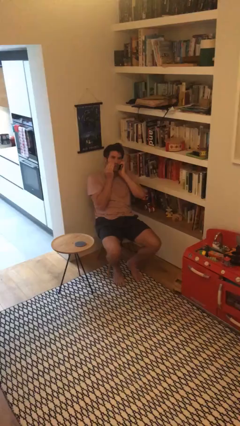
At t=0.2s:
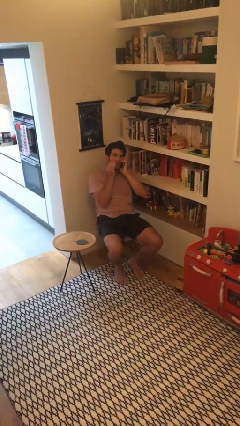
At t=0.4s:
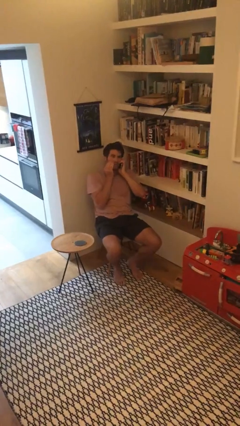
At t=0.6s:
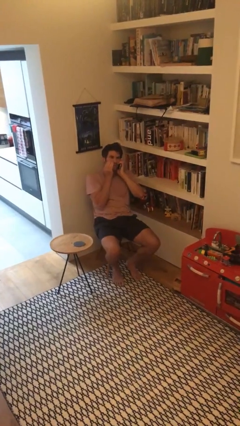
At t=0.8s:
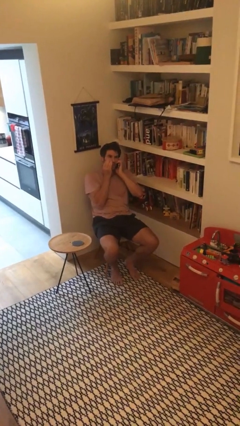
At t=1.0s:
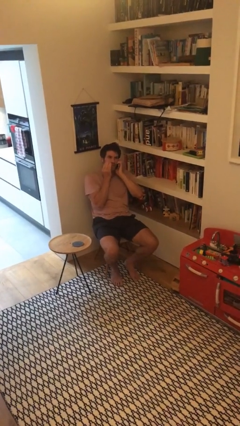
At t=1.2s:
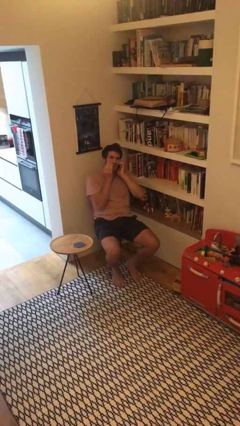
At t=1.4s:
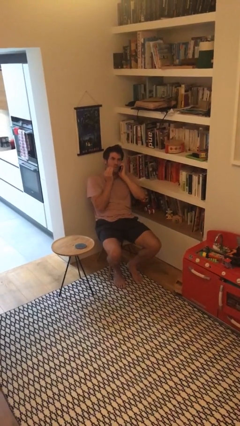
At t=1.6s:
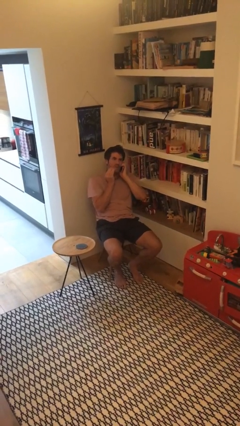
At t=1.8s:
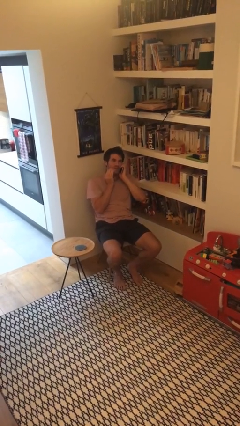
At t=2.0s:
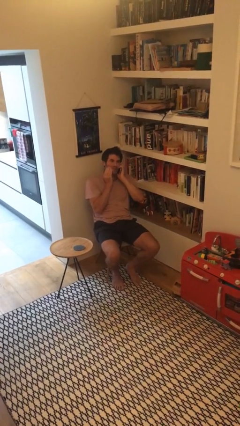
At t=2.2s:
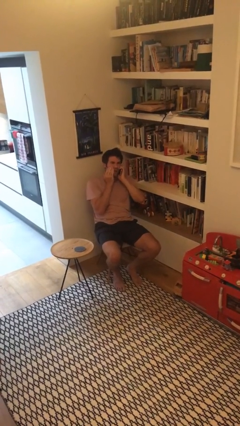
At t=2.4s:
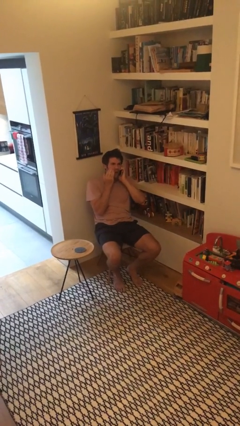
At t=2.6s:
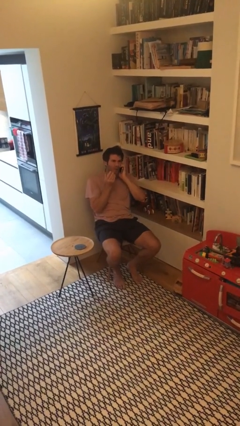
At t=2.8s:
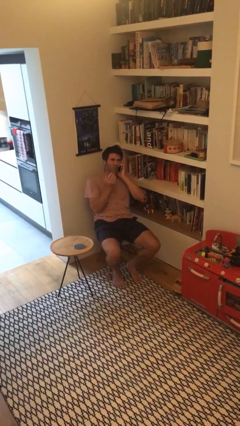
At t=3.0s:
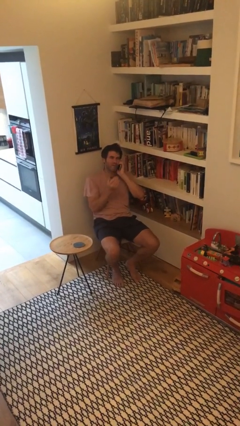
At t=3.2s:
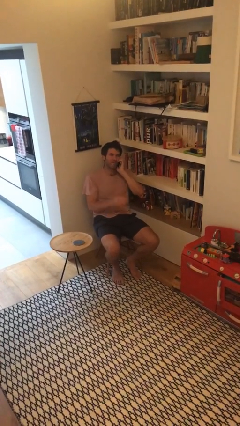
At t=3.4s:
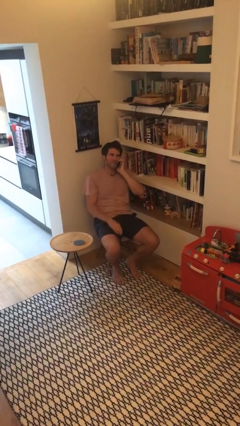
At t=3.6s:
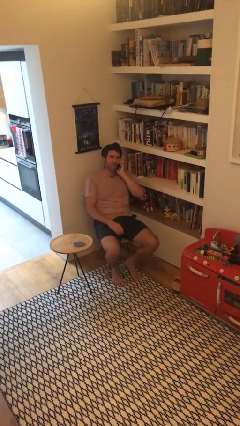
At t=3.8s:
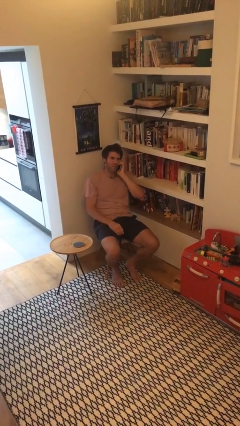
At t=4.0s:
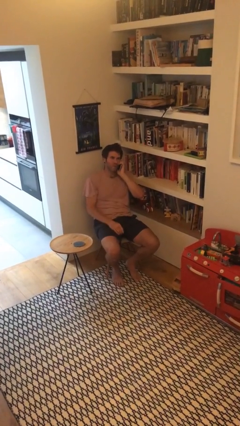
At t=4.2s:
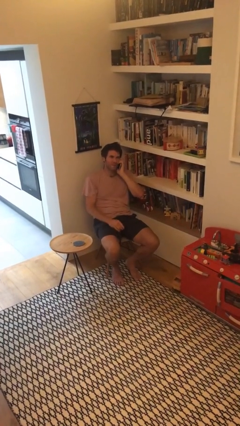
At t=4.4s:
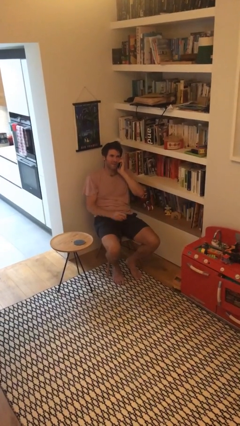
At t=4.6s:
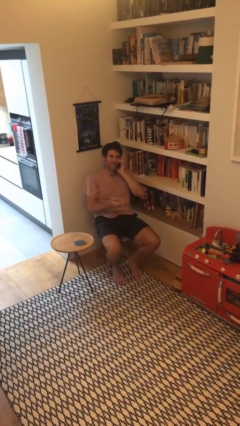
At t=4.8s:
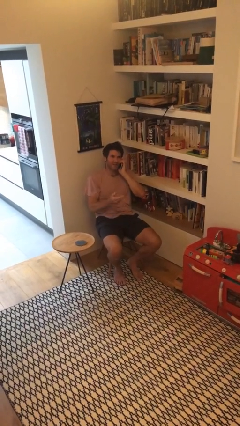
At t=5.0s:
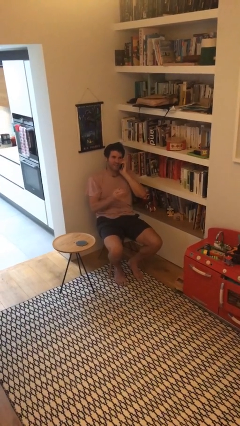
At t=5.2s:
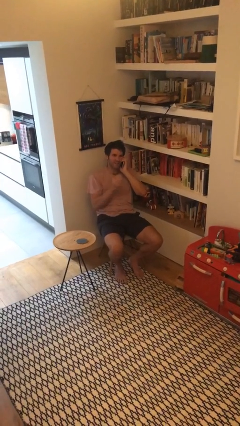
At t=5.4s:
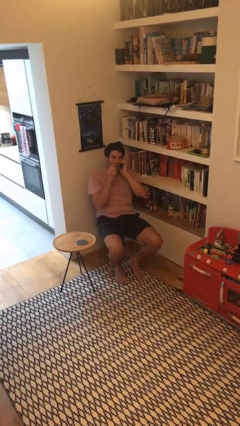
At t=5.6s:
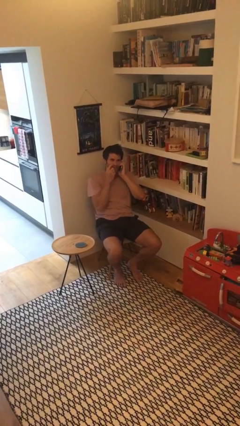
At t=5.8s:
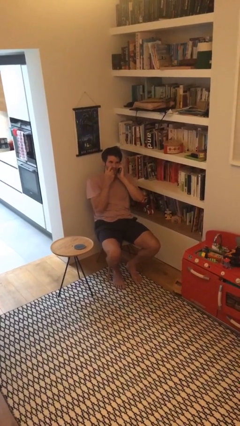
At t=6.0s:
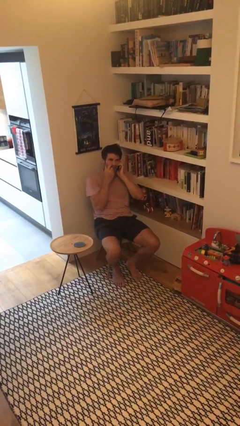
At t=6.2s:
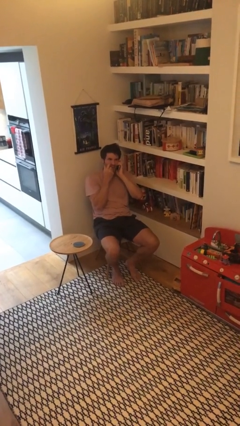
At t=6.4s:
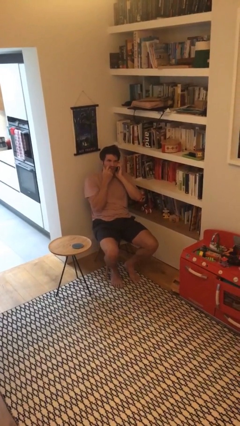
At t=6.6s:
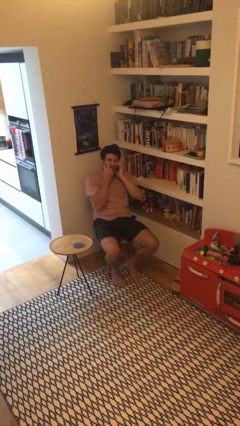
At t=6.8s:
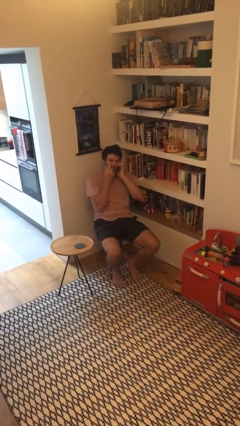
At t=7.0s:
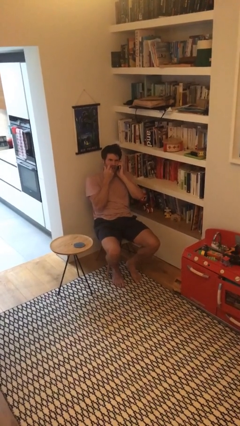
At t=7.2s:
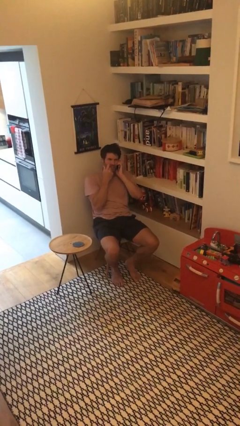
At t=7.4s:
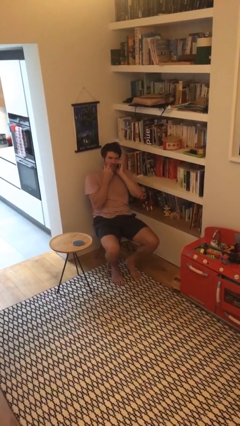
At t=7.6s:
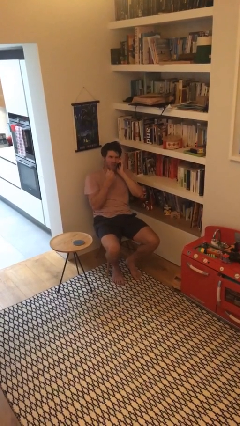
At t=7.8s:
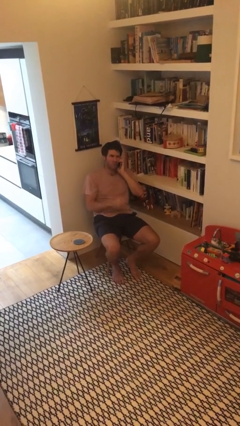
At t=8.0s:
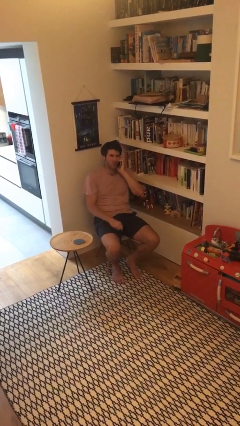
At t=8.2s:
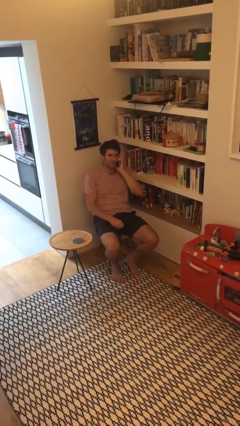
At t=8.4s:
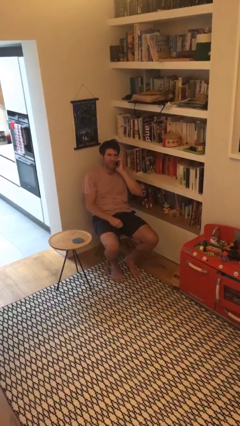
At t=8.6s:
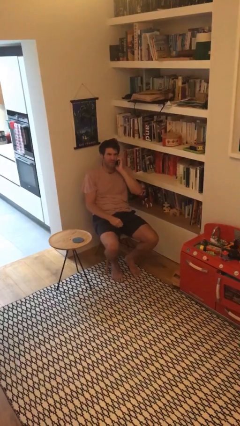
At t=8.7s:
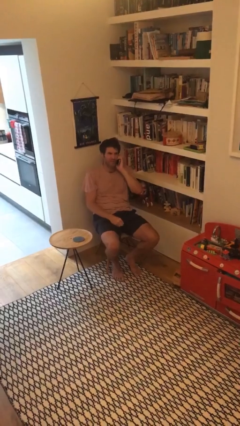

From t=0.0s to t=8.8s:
person talks on phone

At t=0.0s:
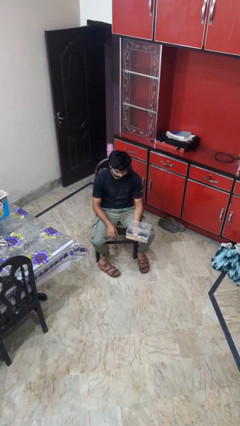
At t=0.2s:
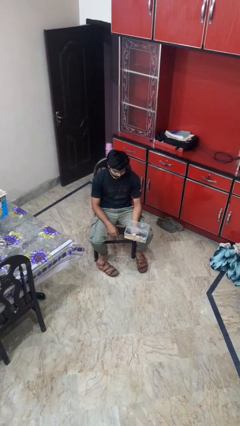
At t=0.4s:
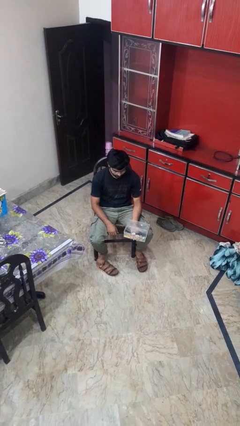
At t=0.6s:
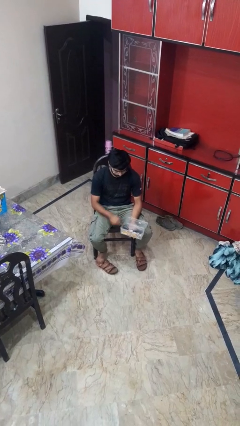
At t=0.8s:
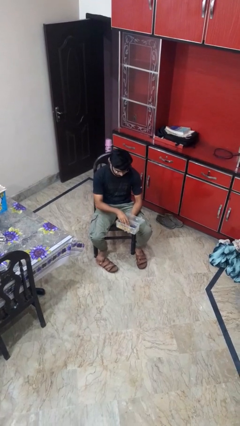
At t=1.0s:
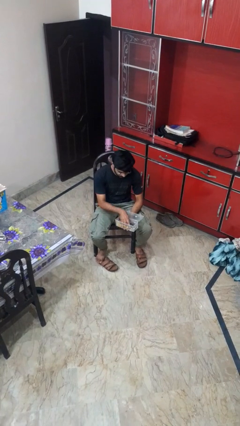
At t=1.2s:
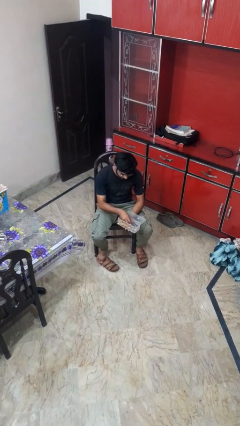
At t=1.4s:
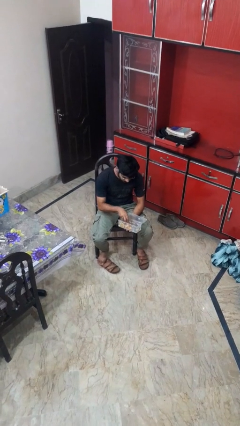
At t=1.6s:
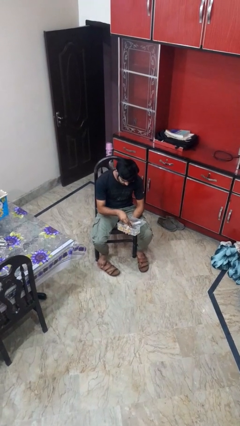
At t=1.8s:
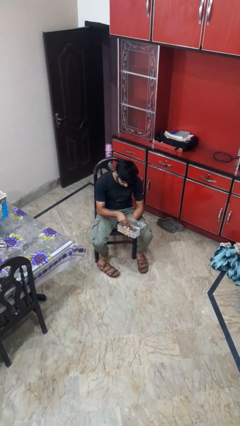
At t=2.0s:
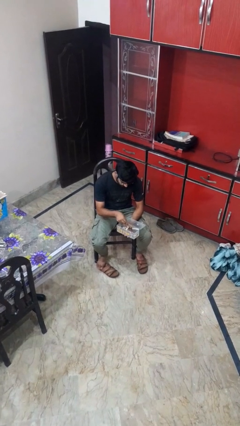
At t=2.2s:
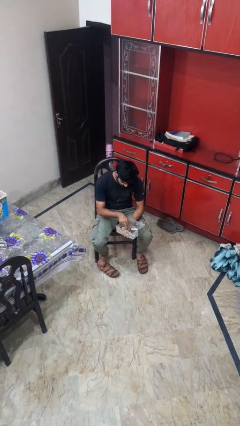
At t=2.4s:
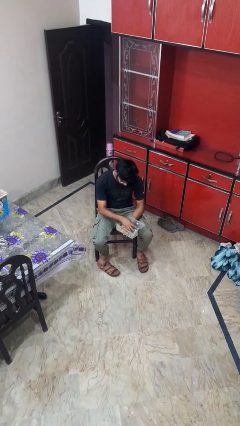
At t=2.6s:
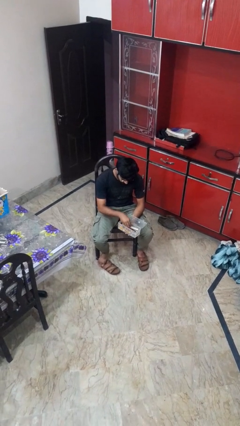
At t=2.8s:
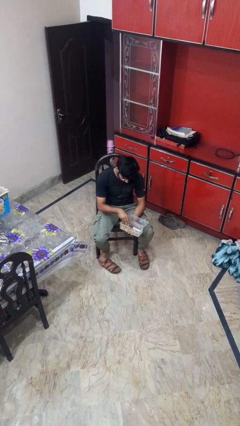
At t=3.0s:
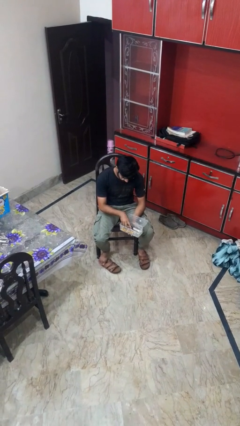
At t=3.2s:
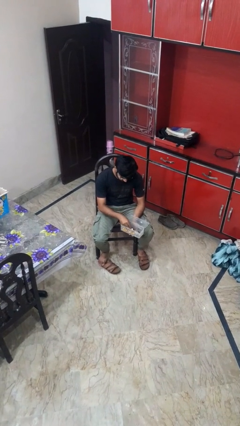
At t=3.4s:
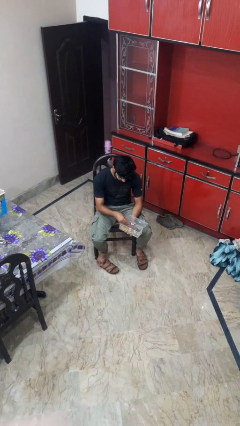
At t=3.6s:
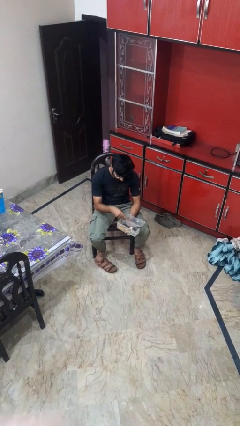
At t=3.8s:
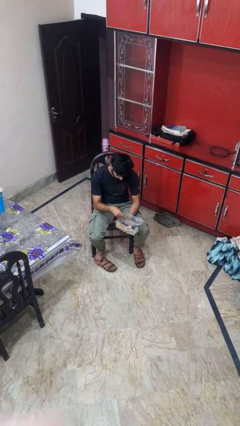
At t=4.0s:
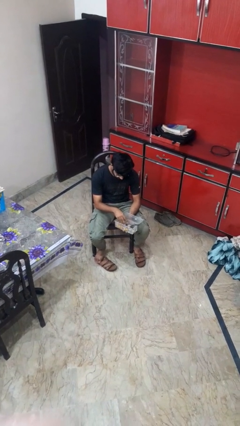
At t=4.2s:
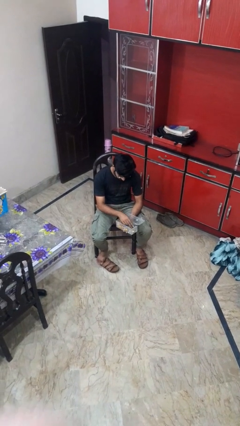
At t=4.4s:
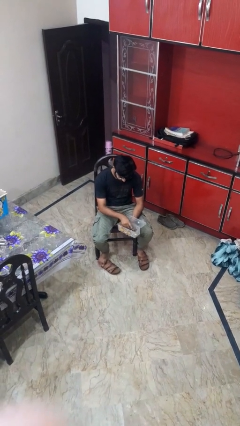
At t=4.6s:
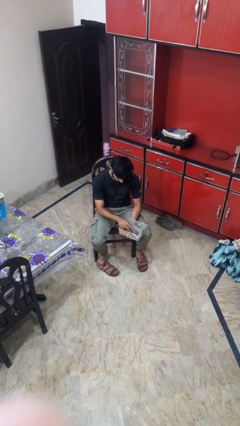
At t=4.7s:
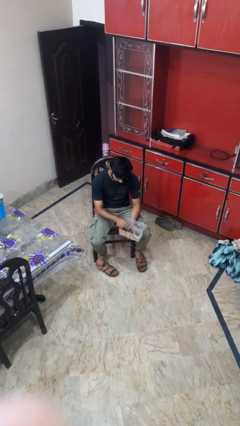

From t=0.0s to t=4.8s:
person searches jewelry box

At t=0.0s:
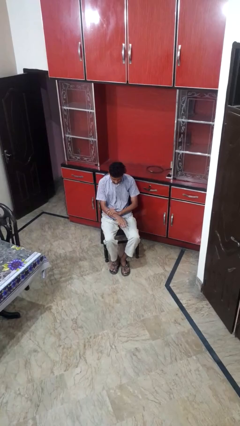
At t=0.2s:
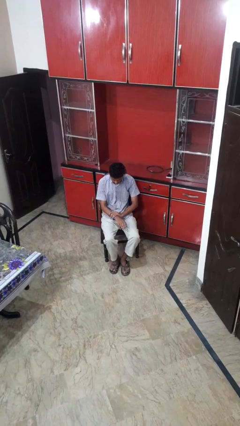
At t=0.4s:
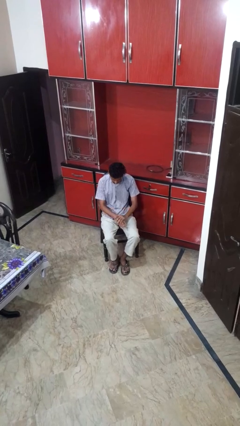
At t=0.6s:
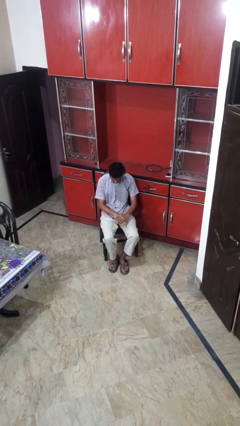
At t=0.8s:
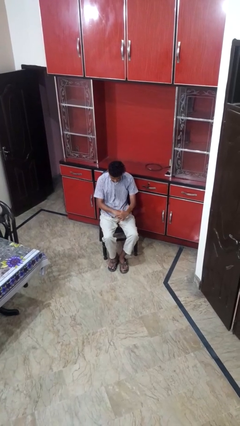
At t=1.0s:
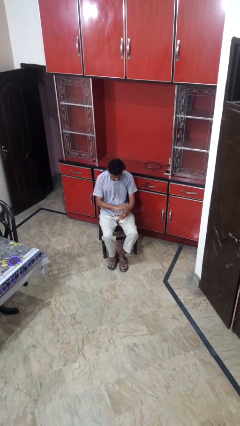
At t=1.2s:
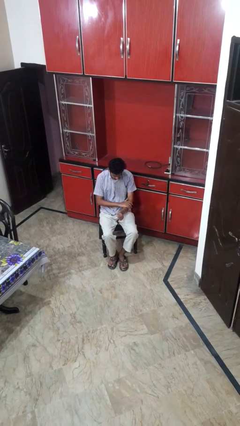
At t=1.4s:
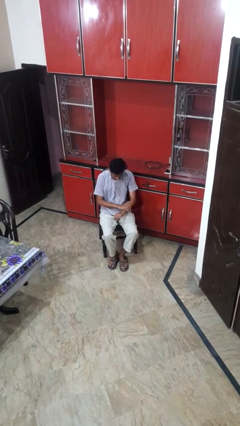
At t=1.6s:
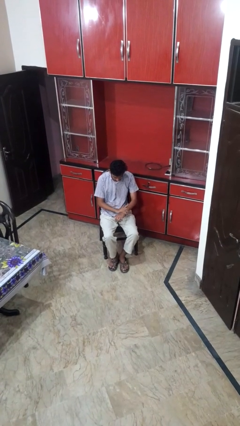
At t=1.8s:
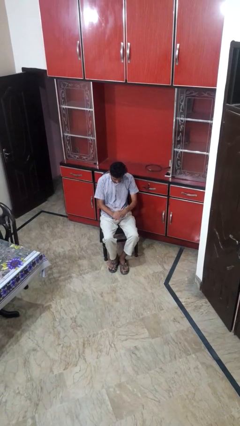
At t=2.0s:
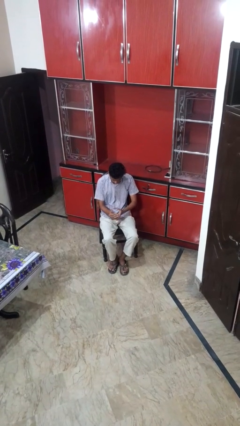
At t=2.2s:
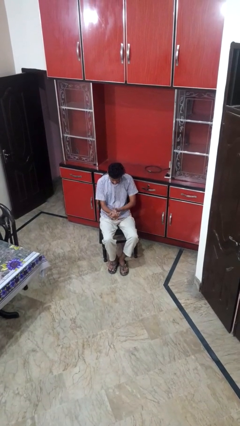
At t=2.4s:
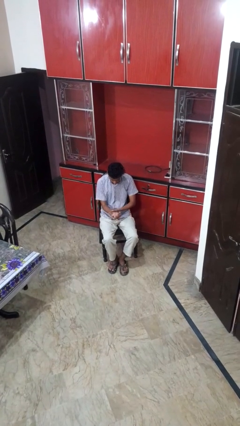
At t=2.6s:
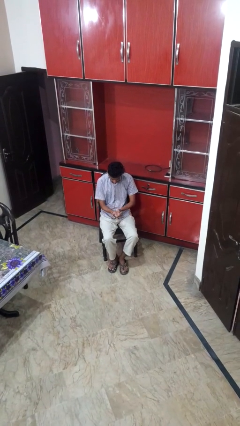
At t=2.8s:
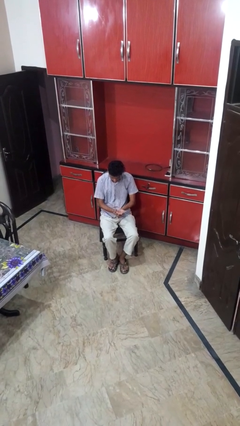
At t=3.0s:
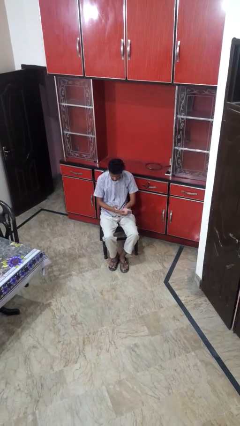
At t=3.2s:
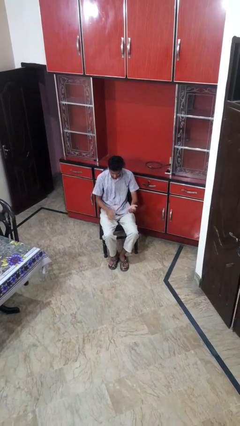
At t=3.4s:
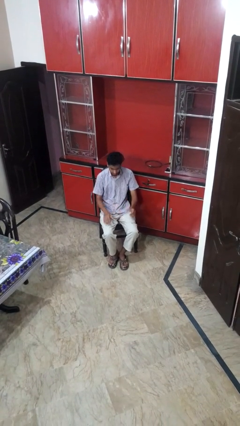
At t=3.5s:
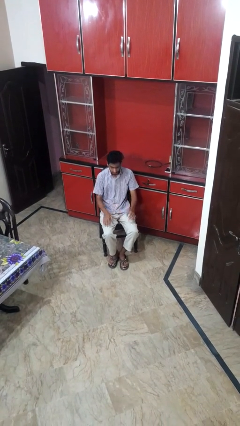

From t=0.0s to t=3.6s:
person looks at hands in lap

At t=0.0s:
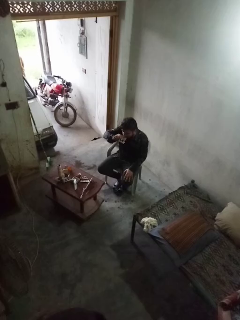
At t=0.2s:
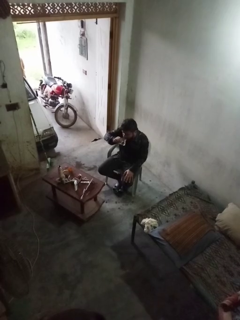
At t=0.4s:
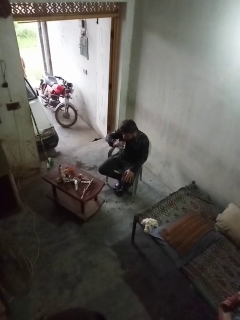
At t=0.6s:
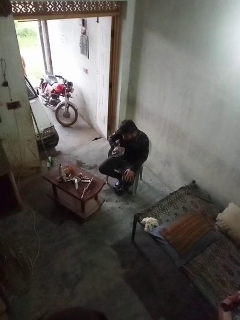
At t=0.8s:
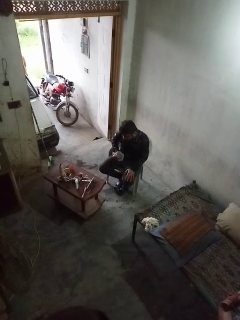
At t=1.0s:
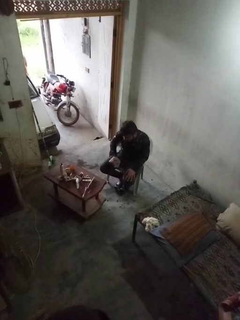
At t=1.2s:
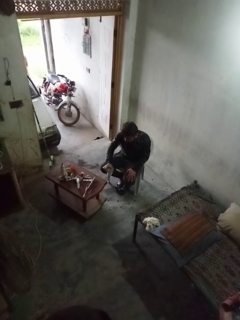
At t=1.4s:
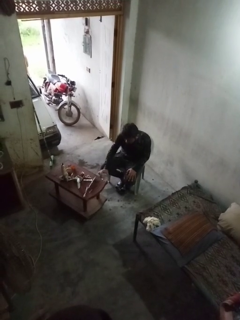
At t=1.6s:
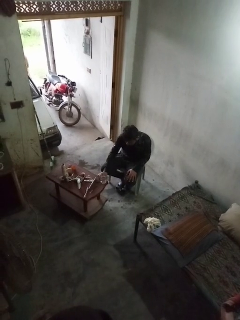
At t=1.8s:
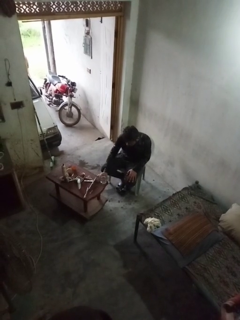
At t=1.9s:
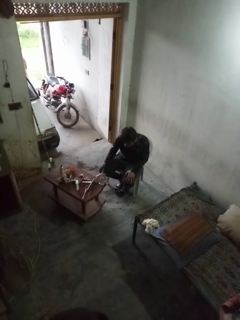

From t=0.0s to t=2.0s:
person puts down object on table
